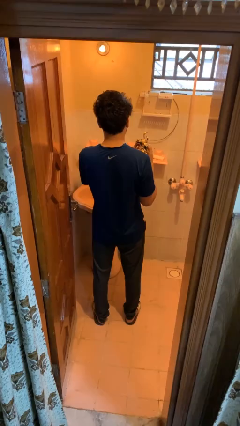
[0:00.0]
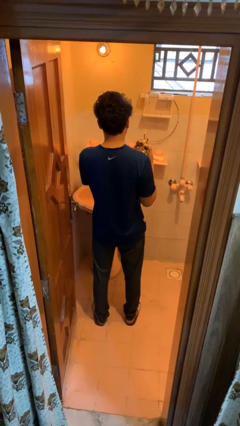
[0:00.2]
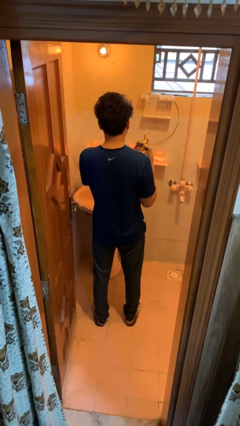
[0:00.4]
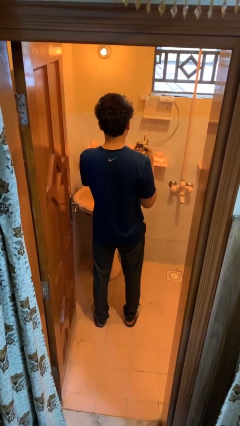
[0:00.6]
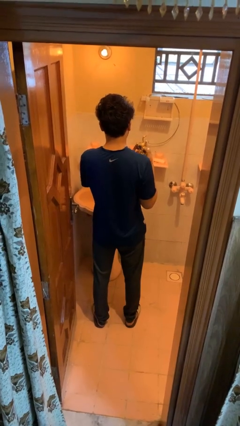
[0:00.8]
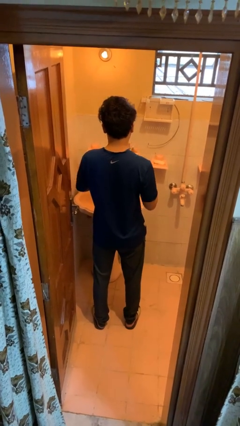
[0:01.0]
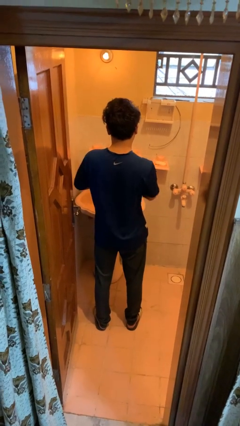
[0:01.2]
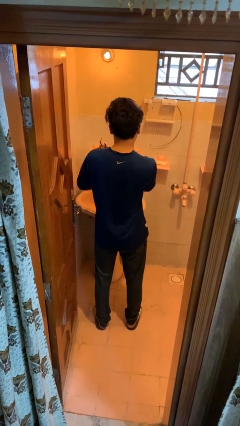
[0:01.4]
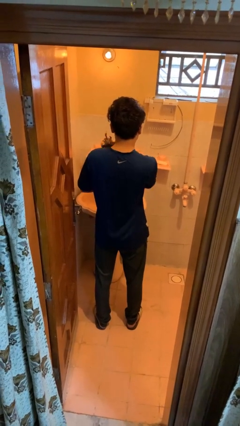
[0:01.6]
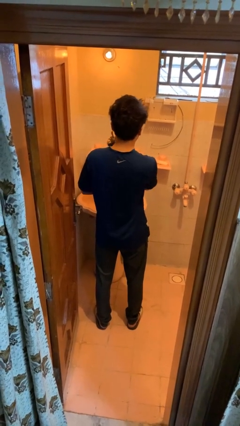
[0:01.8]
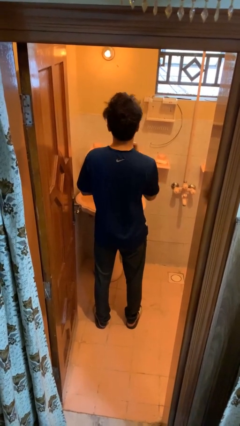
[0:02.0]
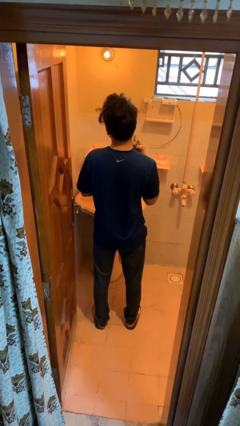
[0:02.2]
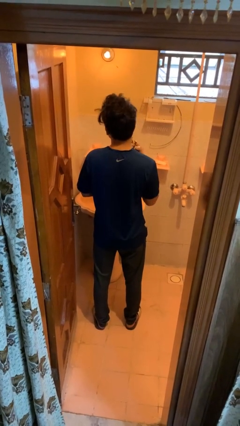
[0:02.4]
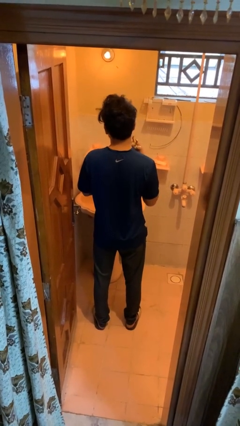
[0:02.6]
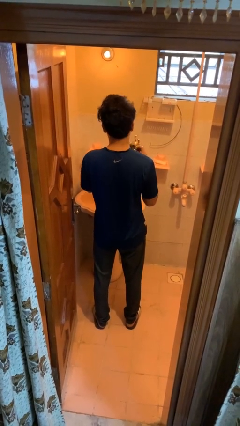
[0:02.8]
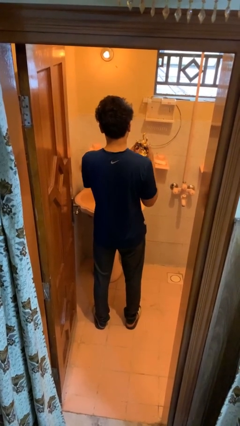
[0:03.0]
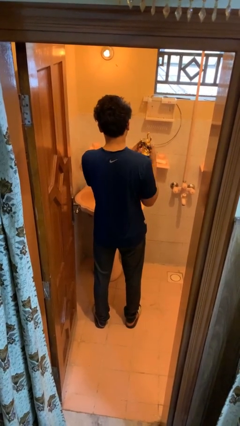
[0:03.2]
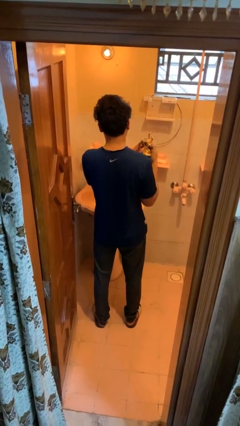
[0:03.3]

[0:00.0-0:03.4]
person applies deodorant

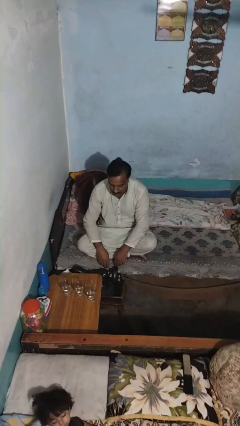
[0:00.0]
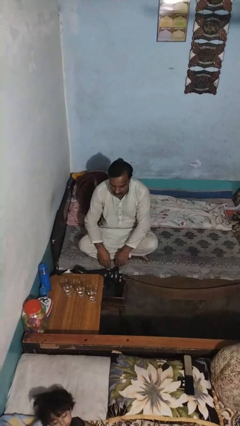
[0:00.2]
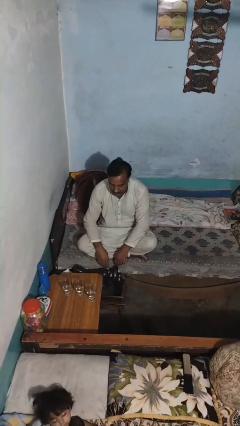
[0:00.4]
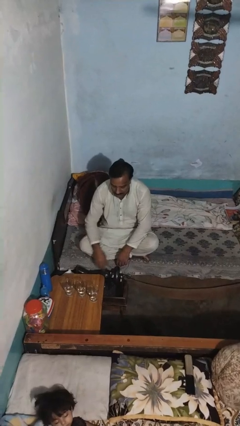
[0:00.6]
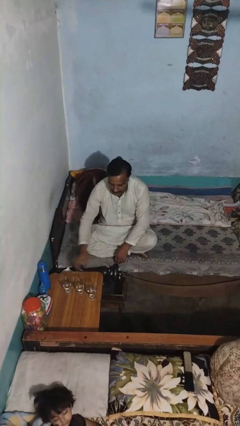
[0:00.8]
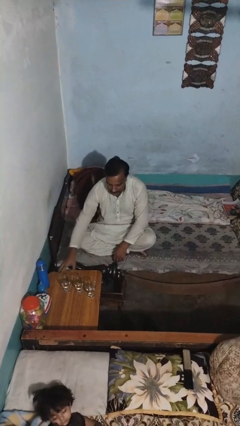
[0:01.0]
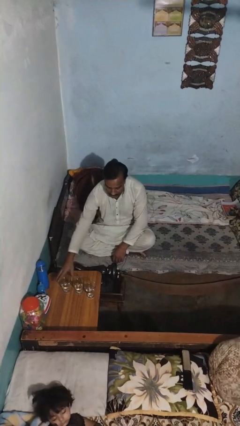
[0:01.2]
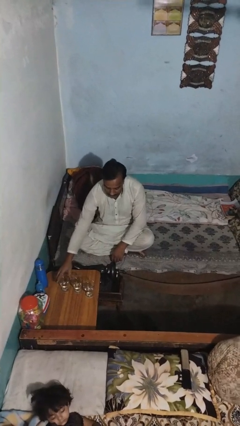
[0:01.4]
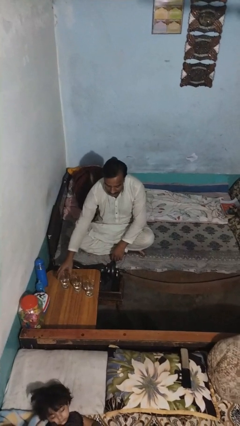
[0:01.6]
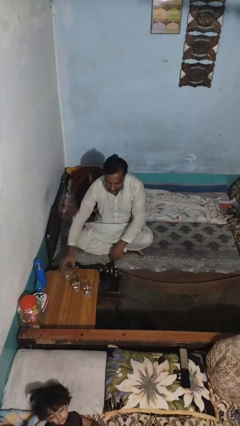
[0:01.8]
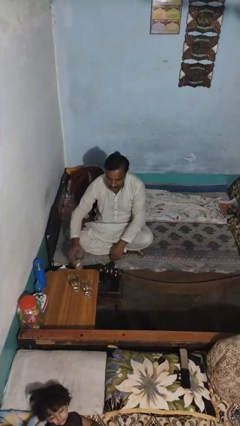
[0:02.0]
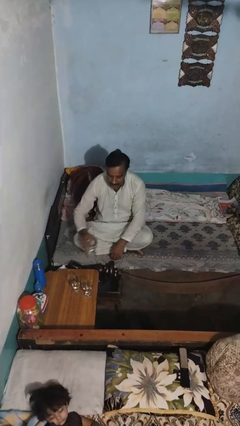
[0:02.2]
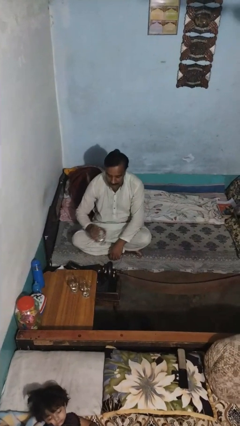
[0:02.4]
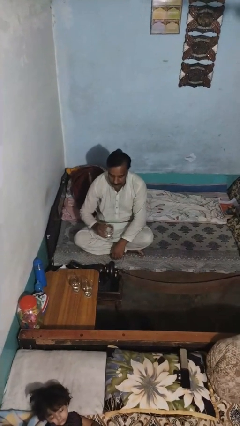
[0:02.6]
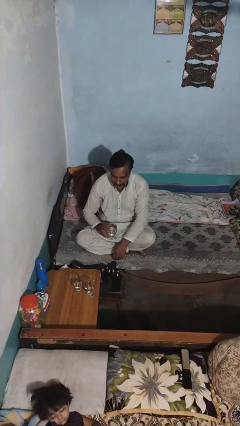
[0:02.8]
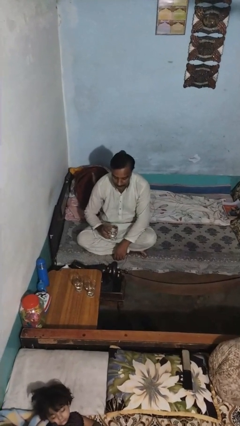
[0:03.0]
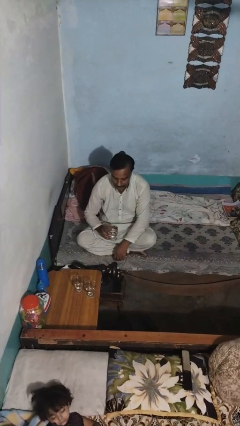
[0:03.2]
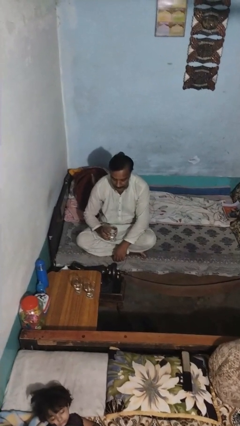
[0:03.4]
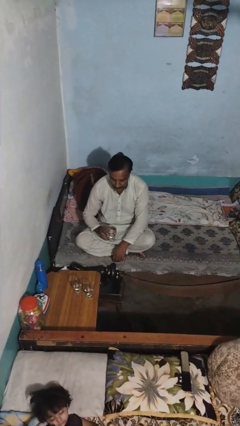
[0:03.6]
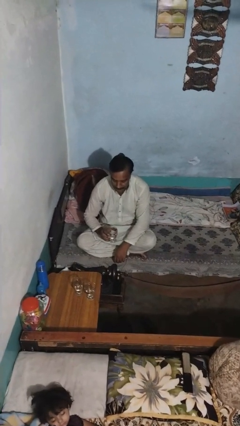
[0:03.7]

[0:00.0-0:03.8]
person picks up object from table

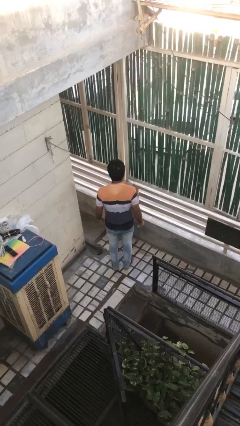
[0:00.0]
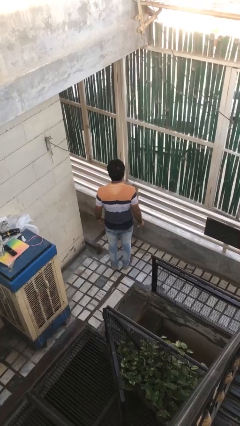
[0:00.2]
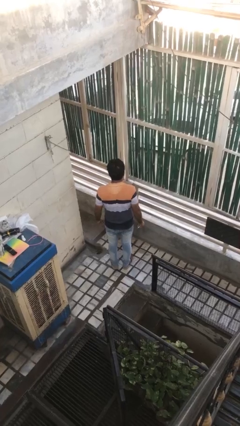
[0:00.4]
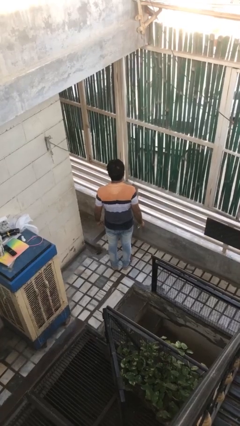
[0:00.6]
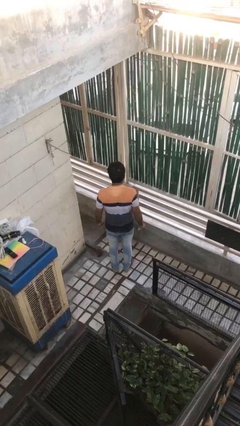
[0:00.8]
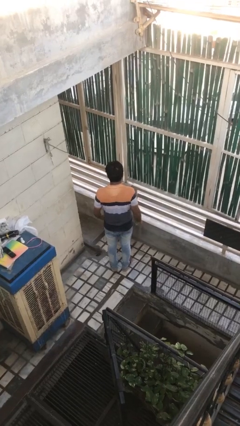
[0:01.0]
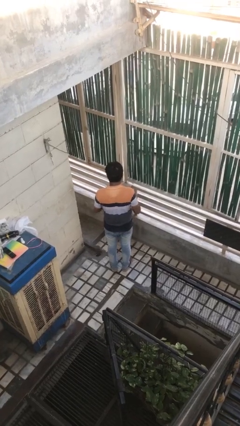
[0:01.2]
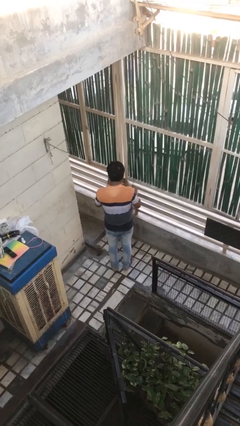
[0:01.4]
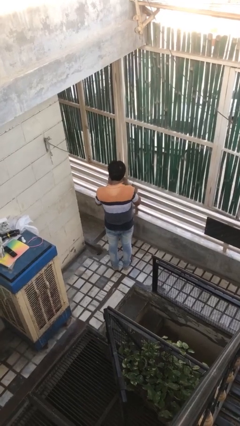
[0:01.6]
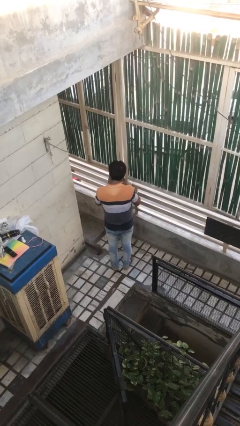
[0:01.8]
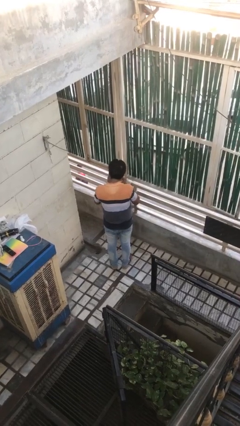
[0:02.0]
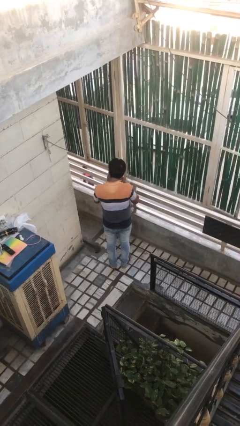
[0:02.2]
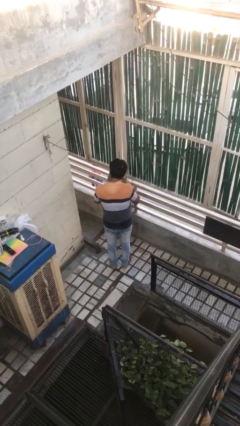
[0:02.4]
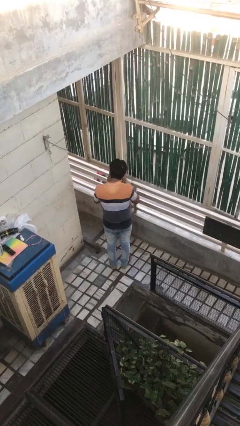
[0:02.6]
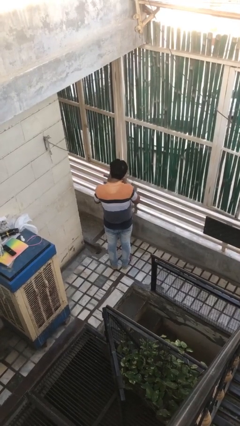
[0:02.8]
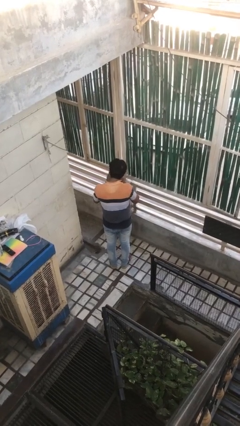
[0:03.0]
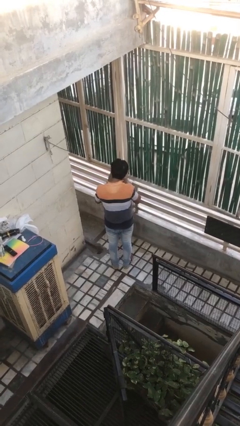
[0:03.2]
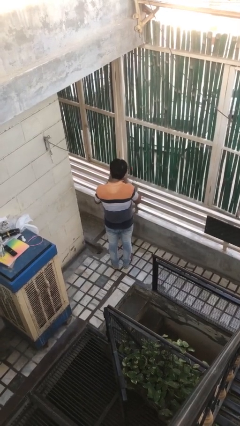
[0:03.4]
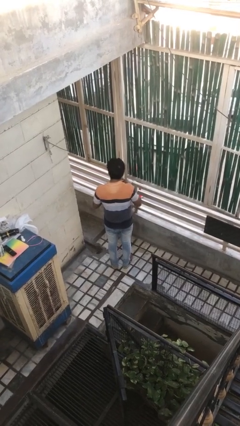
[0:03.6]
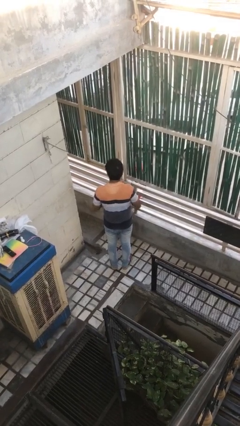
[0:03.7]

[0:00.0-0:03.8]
person clips fingernails

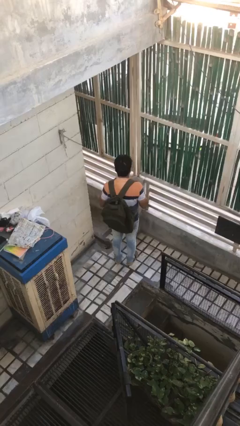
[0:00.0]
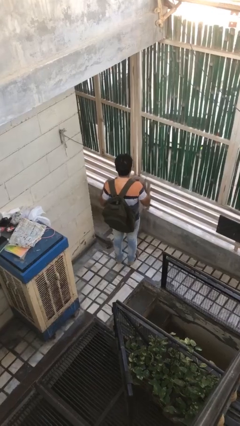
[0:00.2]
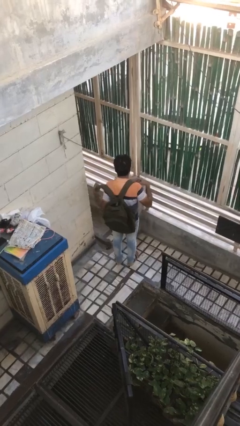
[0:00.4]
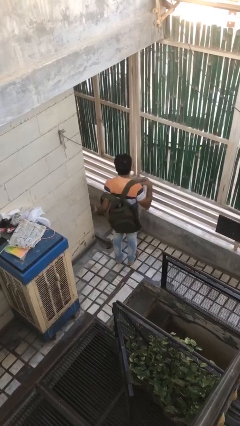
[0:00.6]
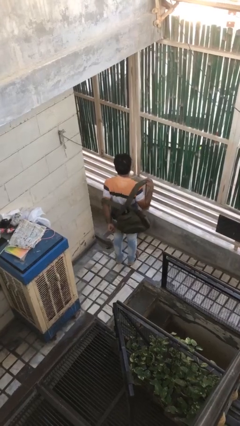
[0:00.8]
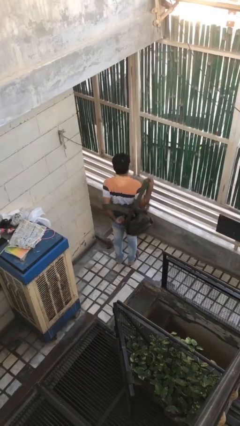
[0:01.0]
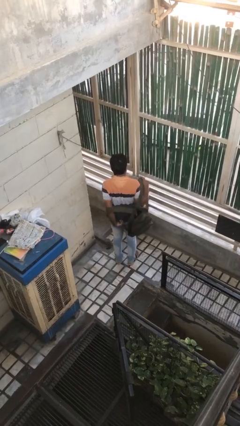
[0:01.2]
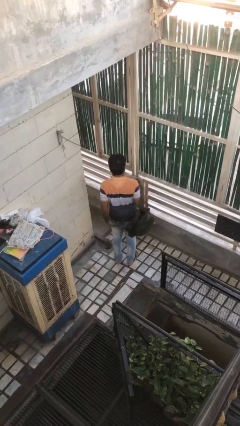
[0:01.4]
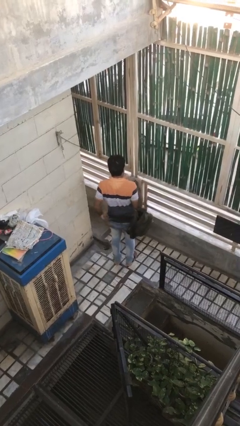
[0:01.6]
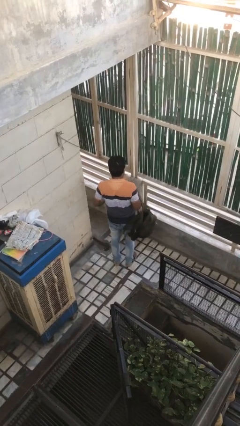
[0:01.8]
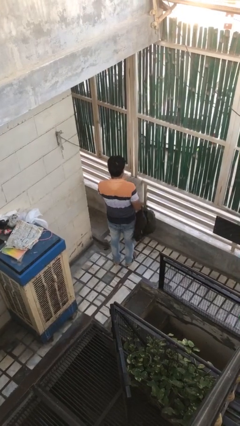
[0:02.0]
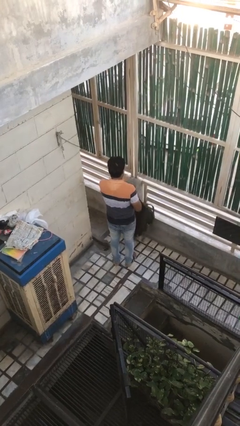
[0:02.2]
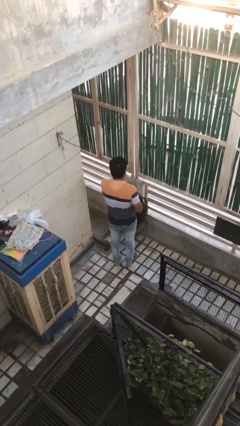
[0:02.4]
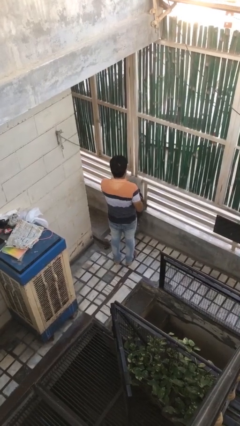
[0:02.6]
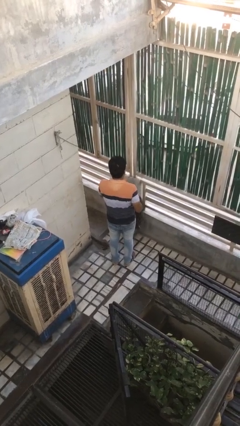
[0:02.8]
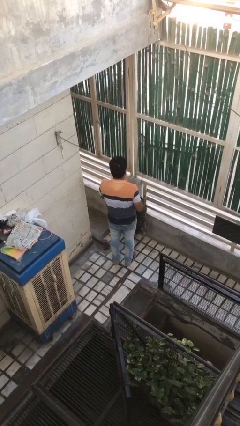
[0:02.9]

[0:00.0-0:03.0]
person takes off backpack

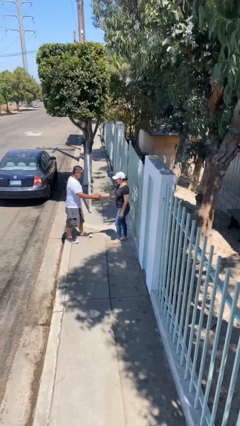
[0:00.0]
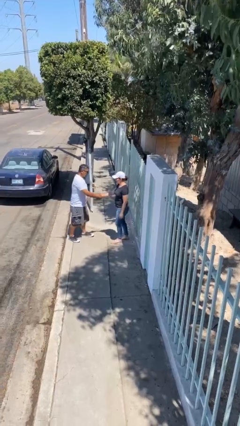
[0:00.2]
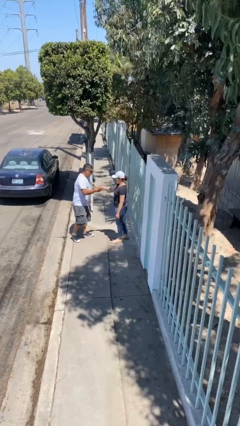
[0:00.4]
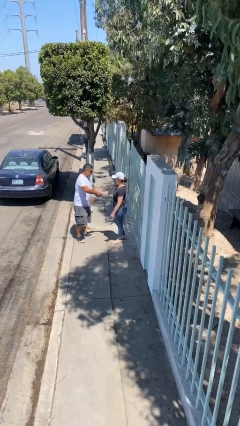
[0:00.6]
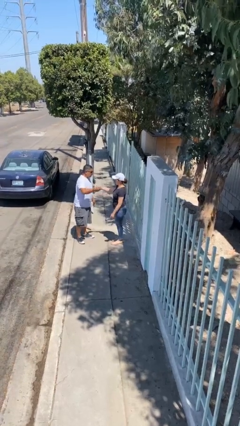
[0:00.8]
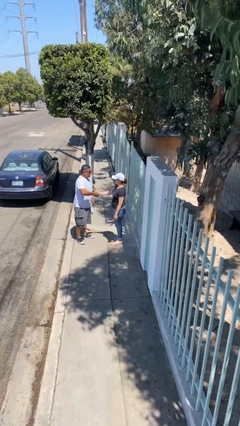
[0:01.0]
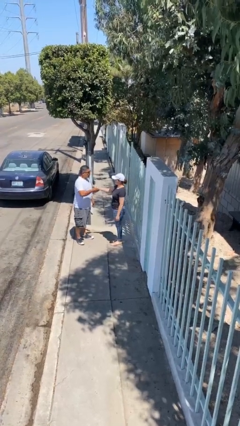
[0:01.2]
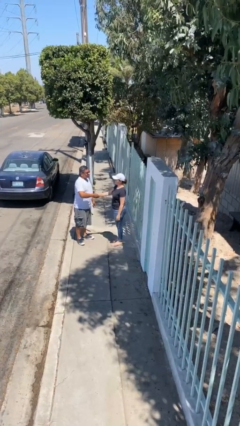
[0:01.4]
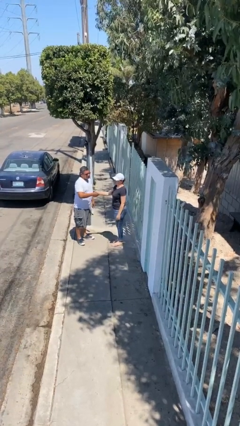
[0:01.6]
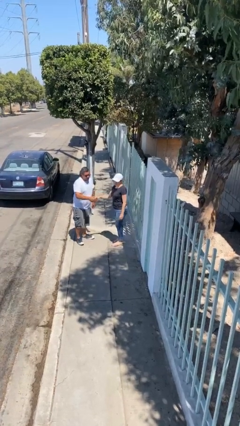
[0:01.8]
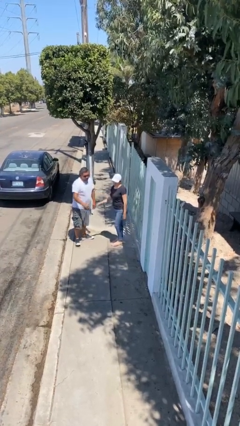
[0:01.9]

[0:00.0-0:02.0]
person shakes hand

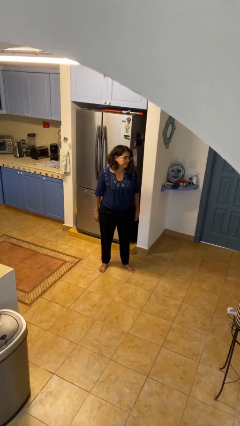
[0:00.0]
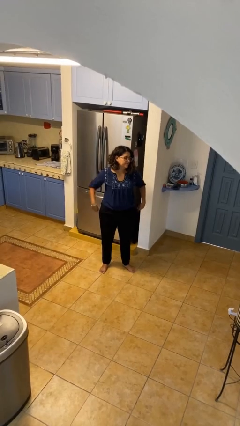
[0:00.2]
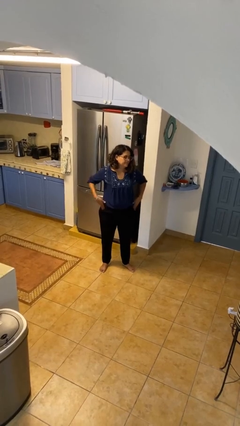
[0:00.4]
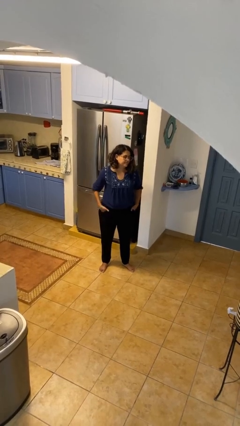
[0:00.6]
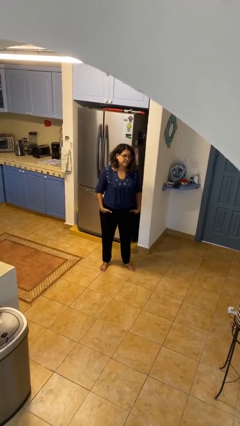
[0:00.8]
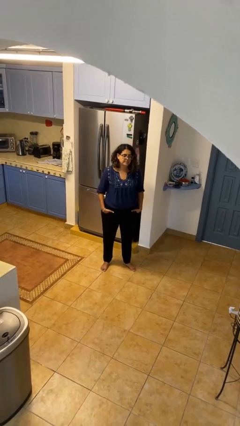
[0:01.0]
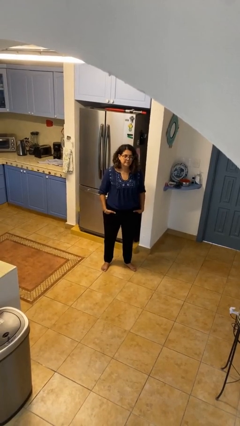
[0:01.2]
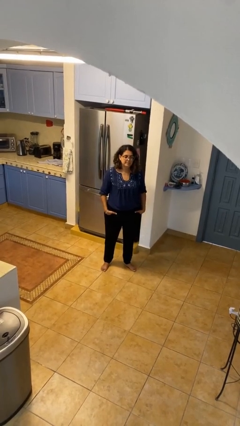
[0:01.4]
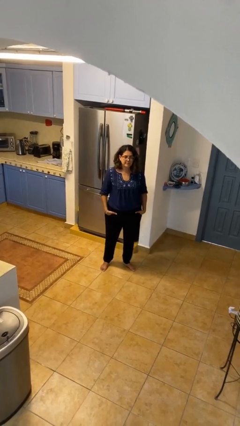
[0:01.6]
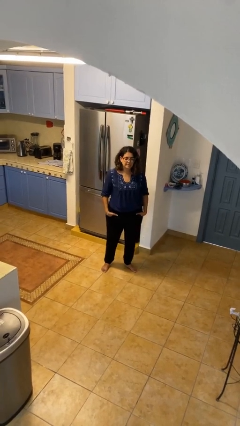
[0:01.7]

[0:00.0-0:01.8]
person puts hands in back pockets
